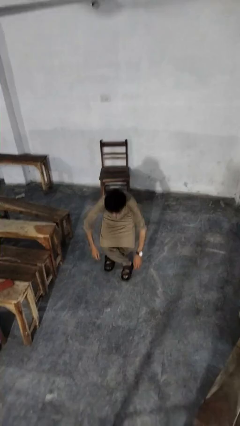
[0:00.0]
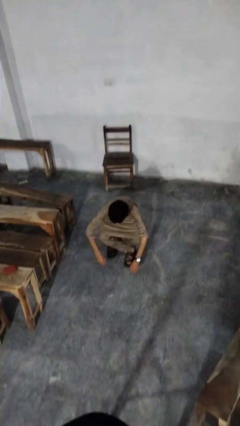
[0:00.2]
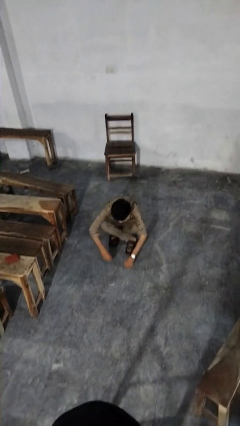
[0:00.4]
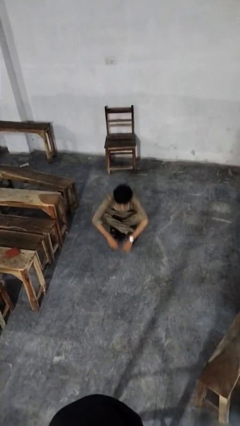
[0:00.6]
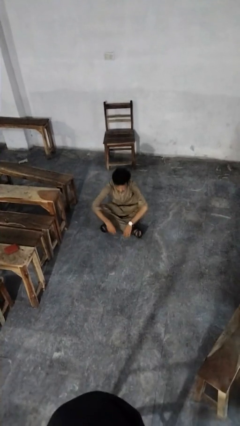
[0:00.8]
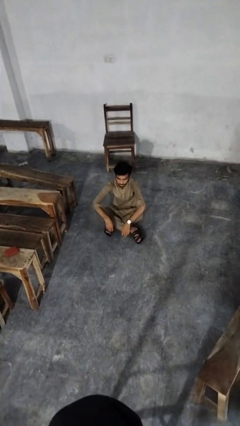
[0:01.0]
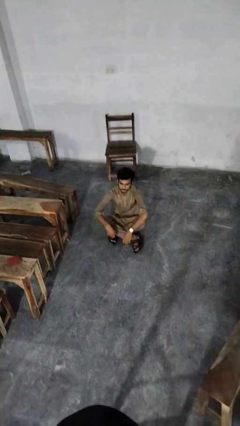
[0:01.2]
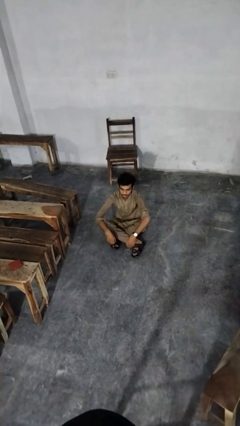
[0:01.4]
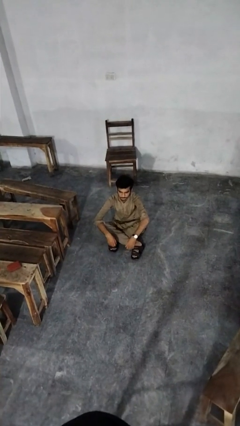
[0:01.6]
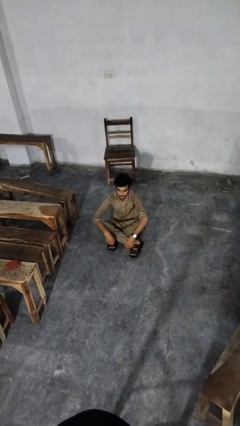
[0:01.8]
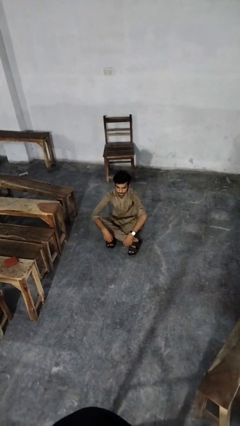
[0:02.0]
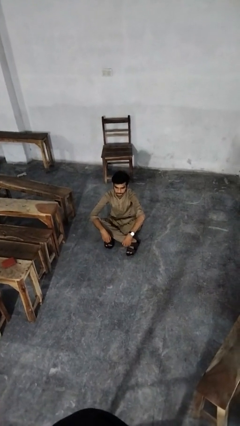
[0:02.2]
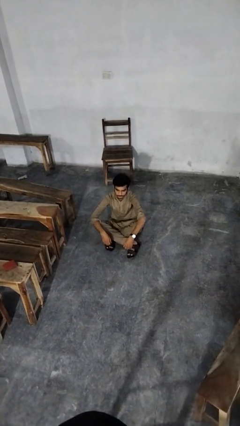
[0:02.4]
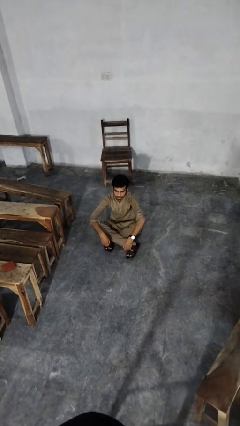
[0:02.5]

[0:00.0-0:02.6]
person sits crisscross

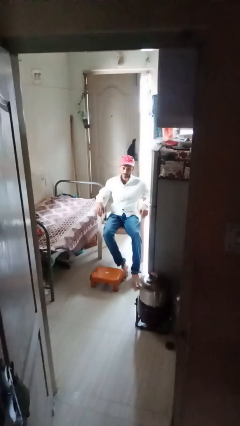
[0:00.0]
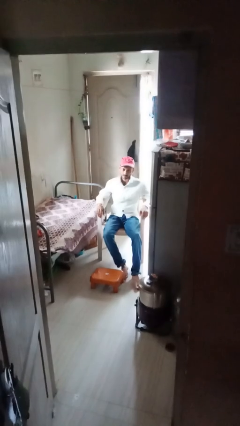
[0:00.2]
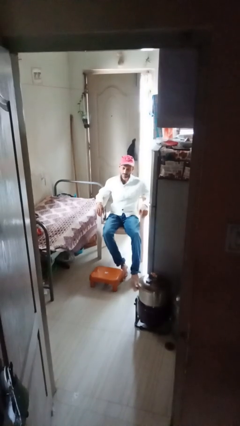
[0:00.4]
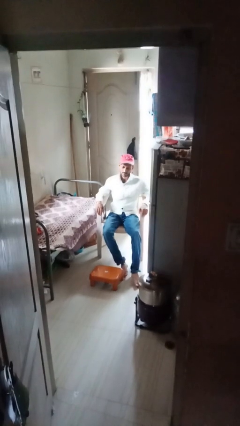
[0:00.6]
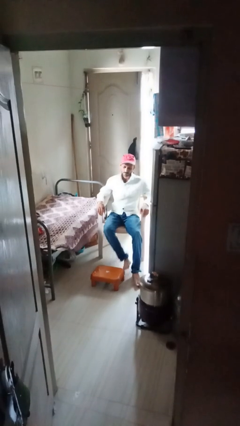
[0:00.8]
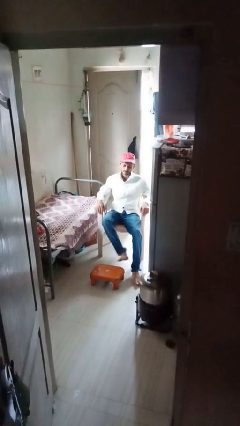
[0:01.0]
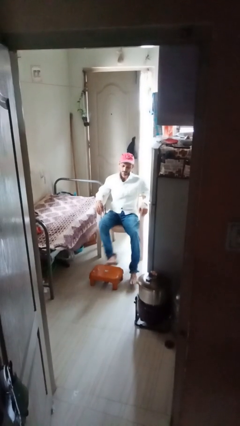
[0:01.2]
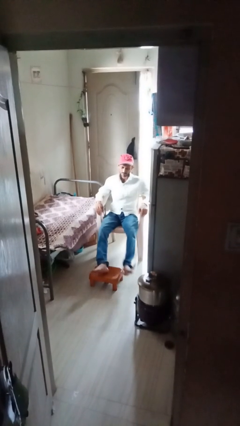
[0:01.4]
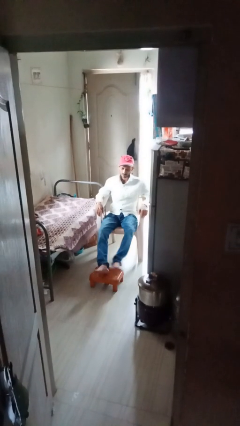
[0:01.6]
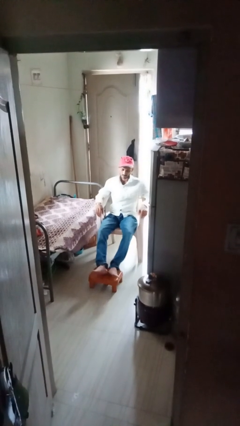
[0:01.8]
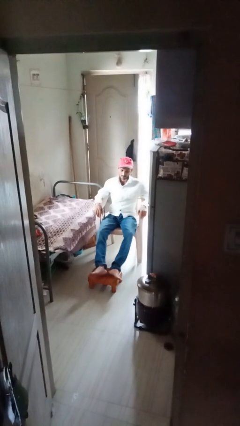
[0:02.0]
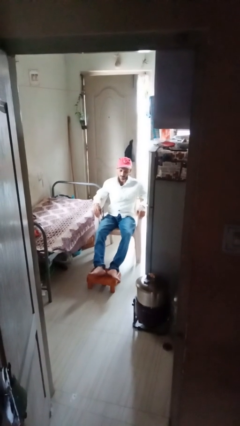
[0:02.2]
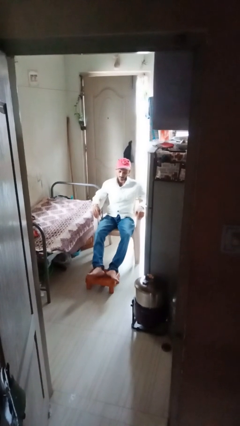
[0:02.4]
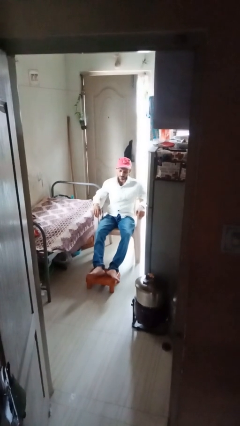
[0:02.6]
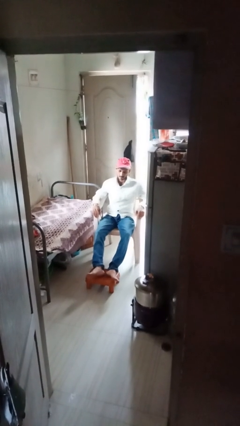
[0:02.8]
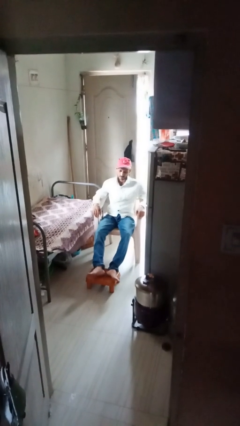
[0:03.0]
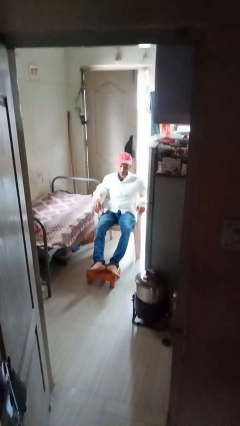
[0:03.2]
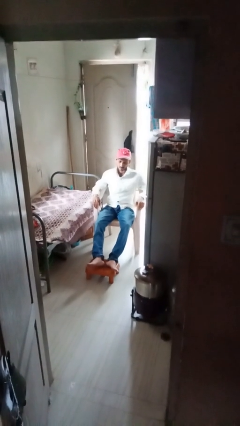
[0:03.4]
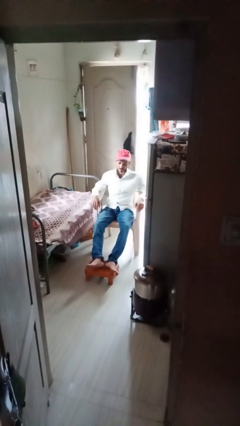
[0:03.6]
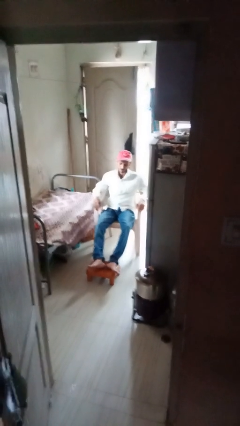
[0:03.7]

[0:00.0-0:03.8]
person puts feet up

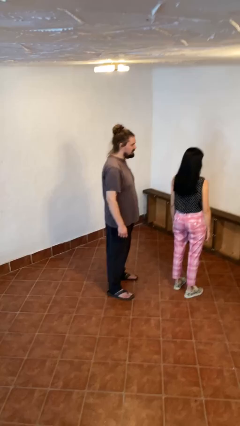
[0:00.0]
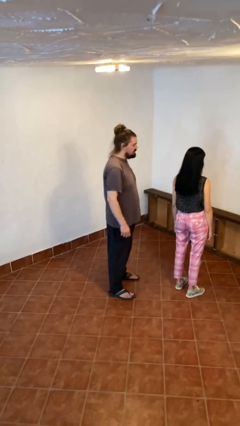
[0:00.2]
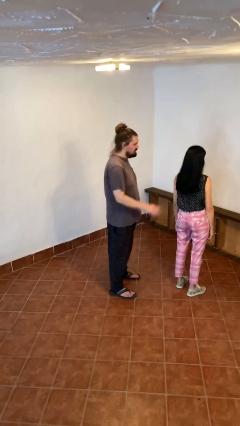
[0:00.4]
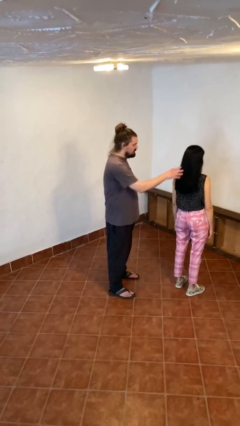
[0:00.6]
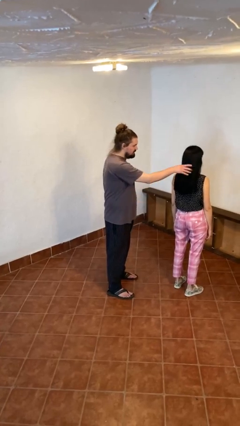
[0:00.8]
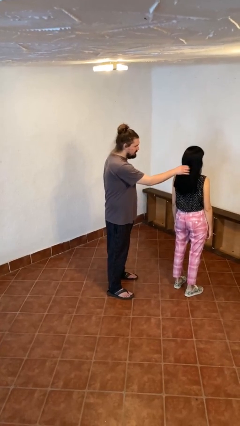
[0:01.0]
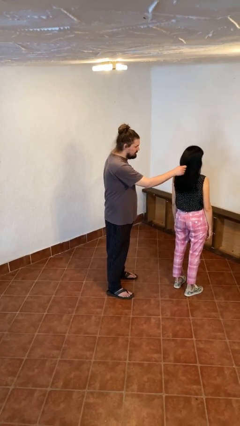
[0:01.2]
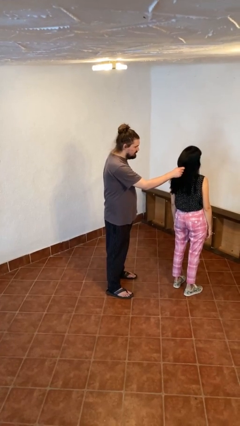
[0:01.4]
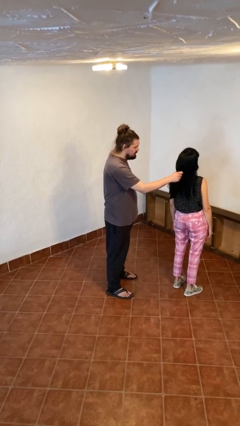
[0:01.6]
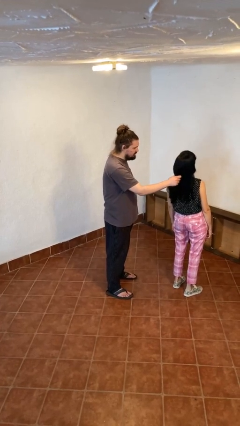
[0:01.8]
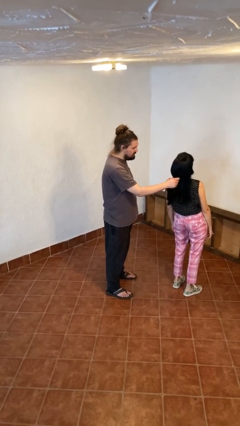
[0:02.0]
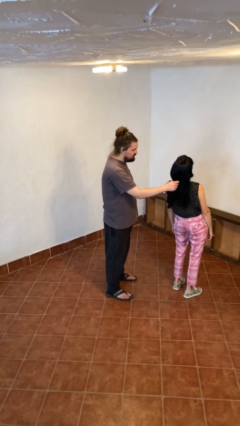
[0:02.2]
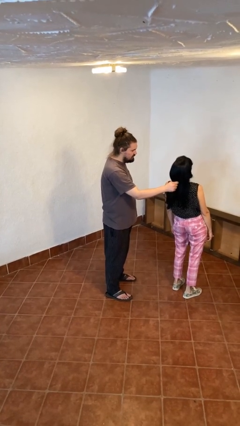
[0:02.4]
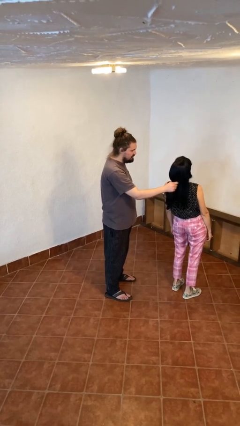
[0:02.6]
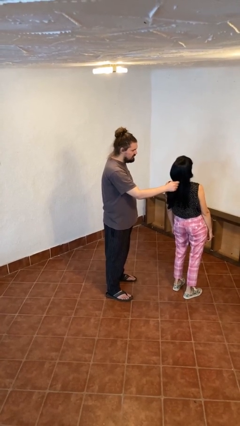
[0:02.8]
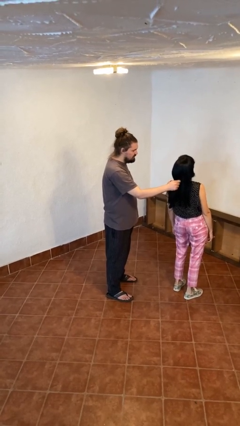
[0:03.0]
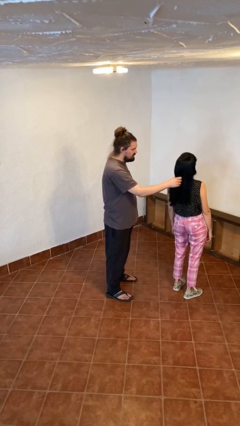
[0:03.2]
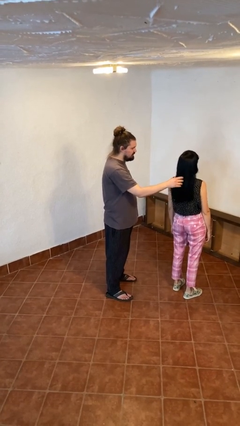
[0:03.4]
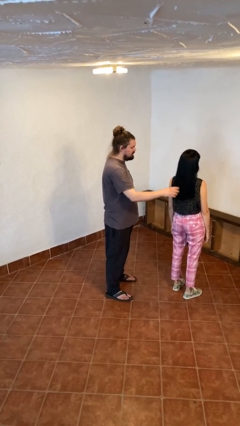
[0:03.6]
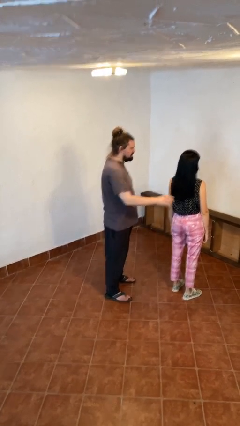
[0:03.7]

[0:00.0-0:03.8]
person grabs person by hair

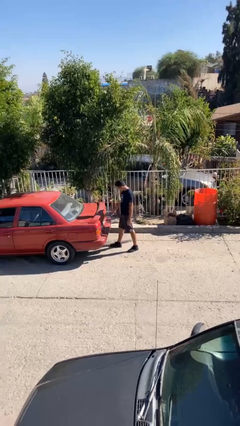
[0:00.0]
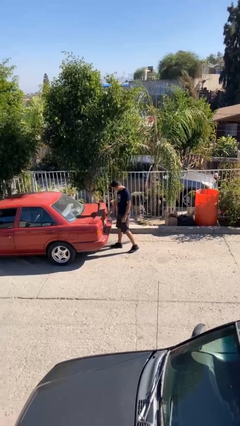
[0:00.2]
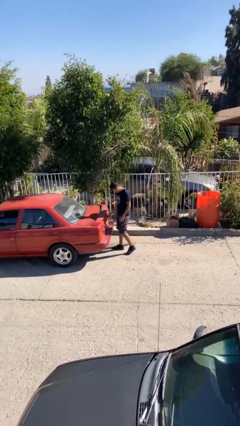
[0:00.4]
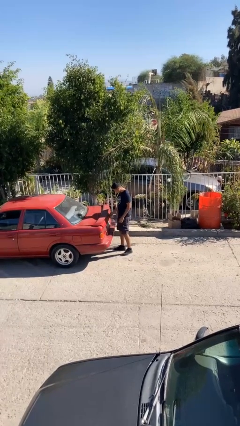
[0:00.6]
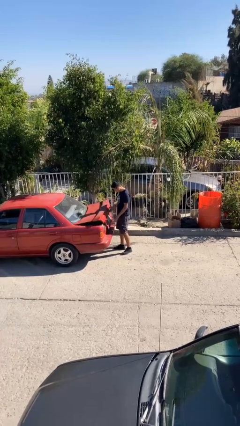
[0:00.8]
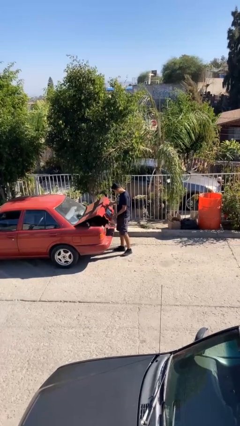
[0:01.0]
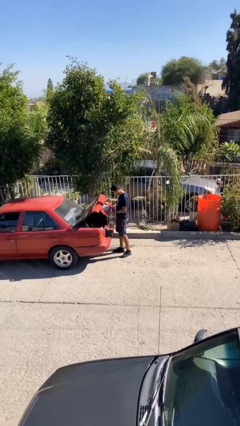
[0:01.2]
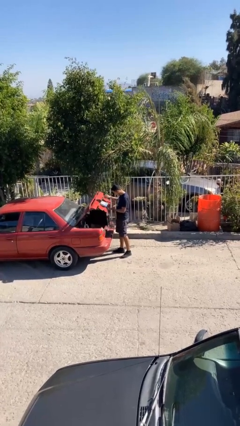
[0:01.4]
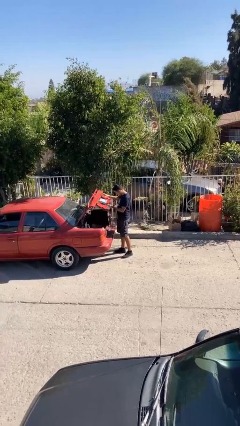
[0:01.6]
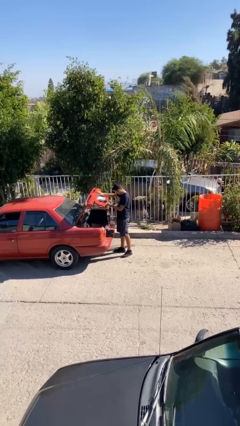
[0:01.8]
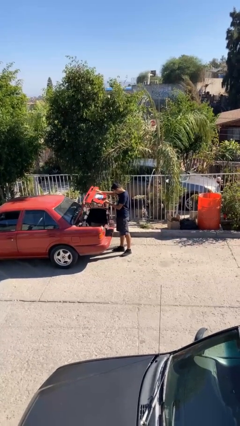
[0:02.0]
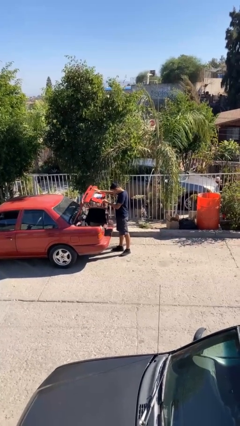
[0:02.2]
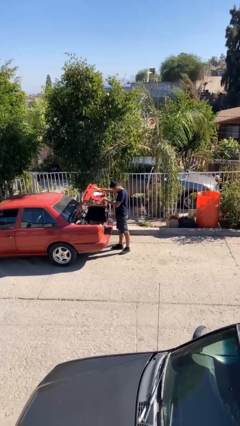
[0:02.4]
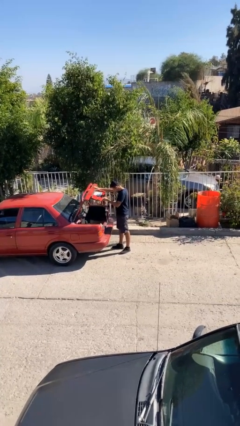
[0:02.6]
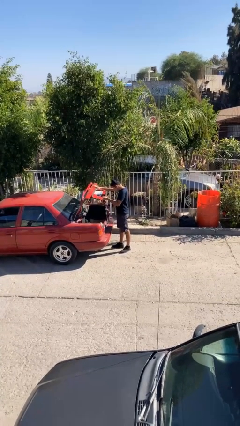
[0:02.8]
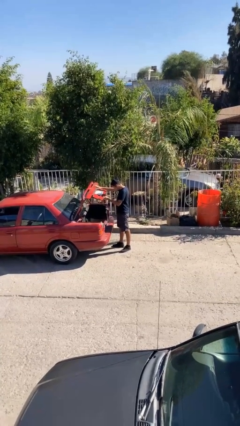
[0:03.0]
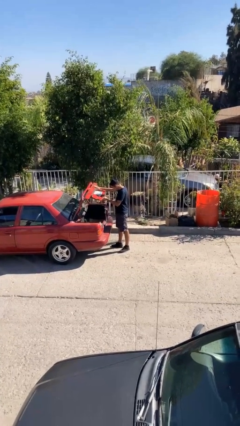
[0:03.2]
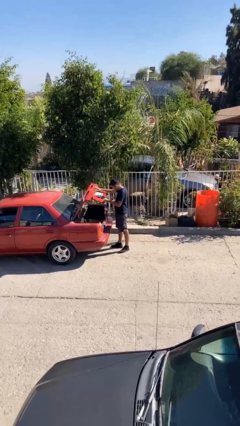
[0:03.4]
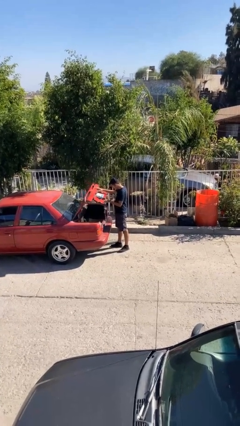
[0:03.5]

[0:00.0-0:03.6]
person opens car trunk

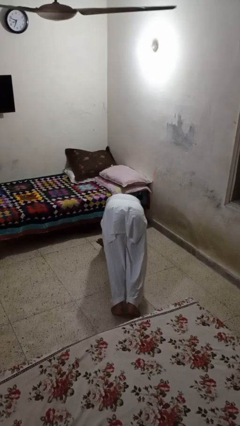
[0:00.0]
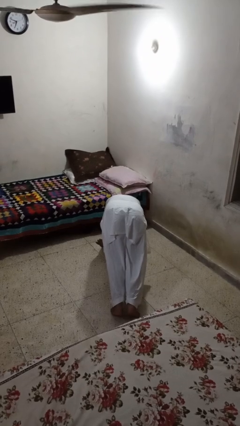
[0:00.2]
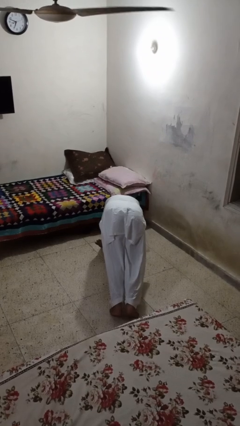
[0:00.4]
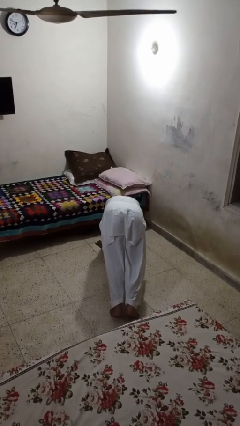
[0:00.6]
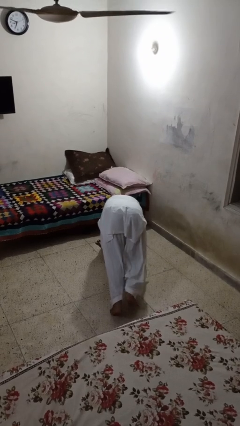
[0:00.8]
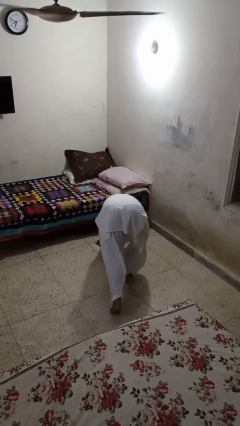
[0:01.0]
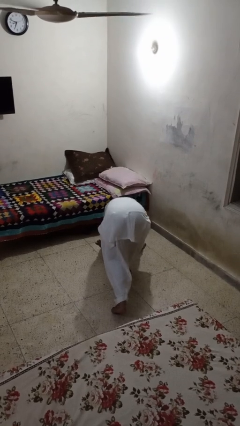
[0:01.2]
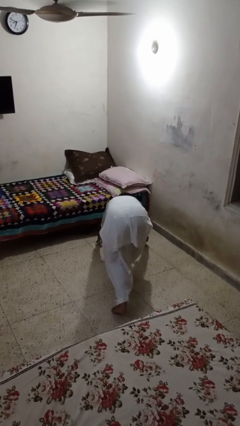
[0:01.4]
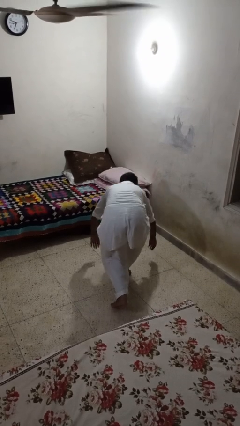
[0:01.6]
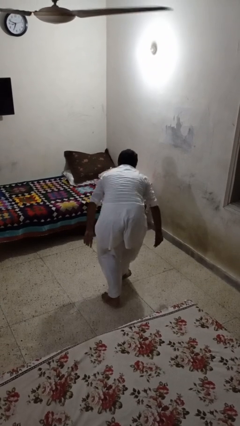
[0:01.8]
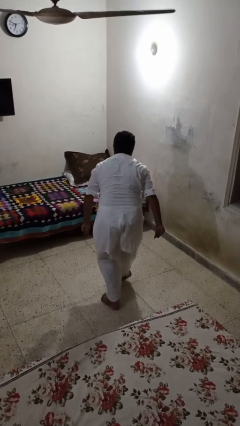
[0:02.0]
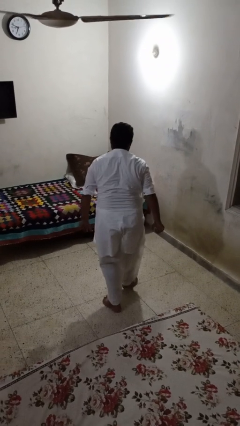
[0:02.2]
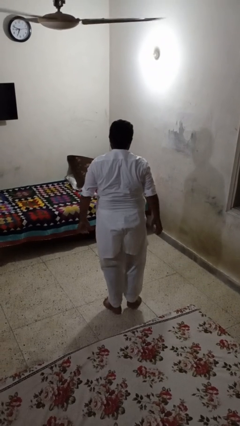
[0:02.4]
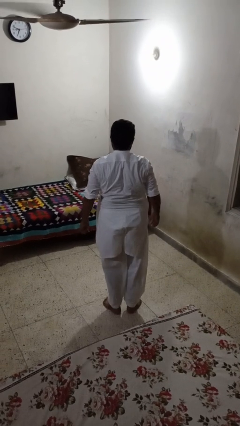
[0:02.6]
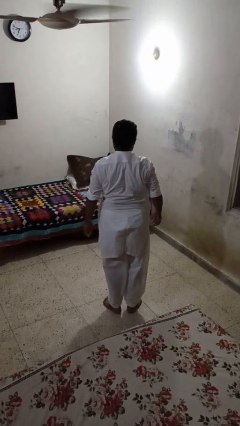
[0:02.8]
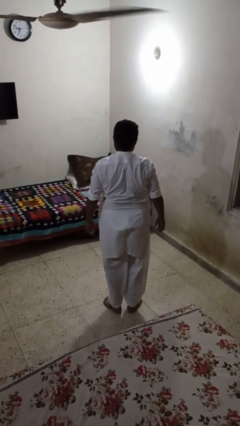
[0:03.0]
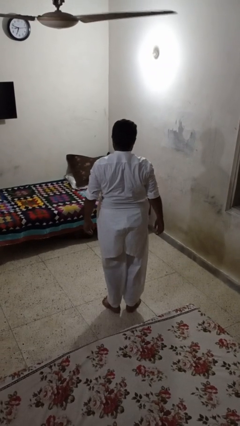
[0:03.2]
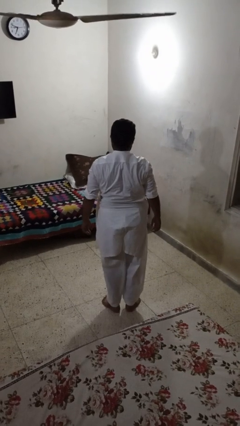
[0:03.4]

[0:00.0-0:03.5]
person stands up from floor

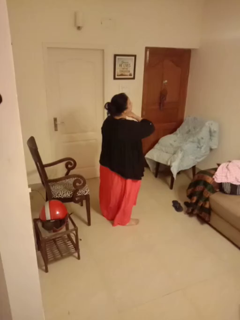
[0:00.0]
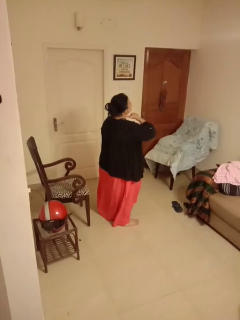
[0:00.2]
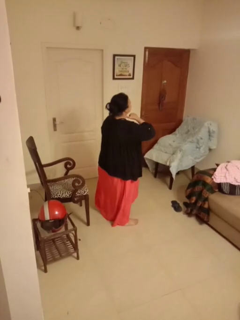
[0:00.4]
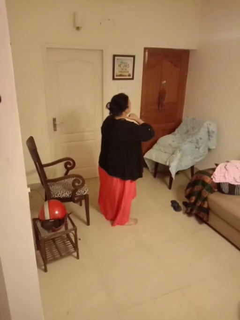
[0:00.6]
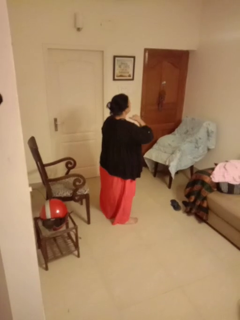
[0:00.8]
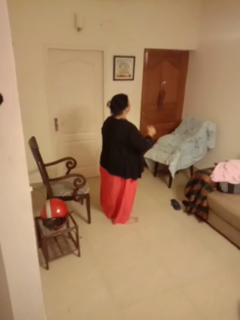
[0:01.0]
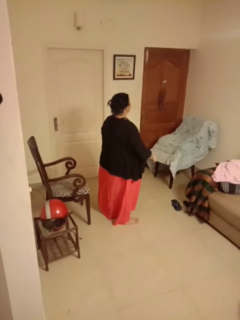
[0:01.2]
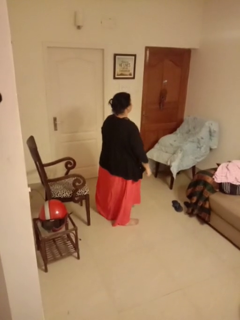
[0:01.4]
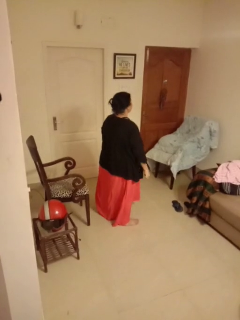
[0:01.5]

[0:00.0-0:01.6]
person gestures cut
